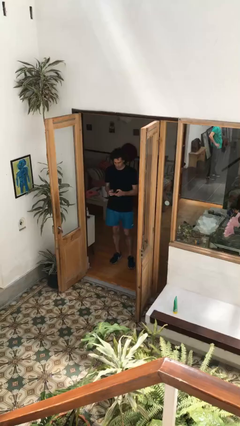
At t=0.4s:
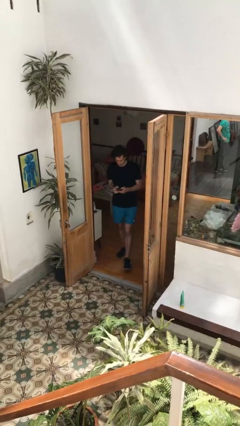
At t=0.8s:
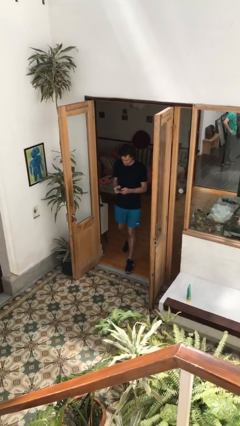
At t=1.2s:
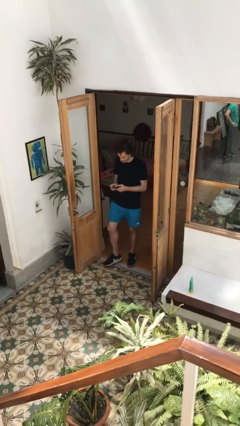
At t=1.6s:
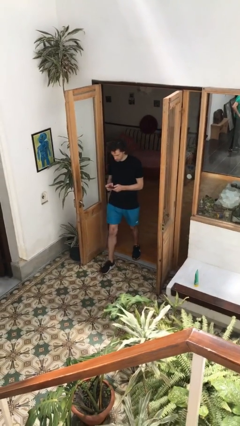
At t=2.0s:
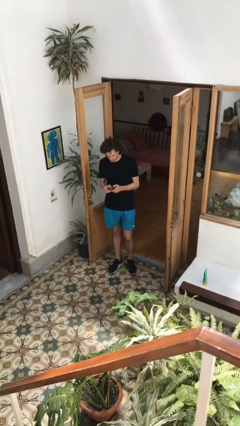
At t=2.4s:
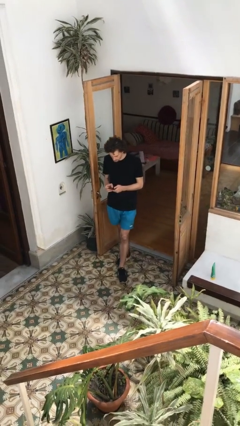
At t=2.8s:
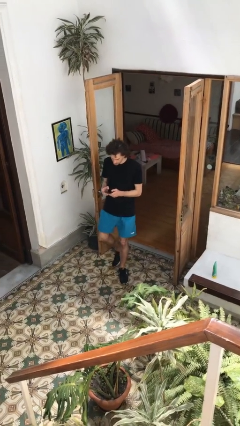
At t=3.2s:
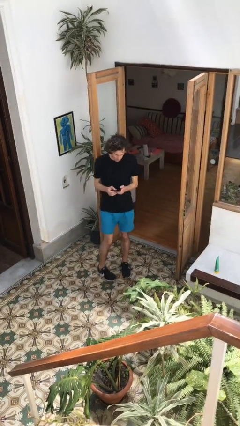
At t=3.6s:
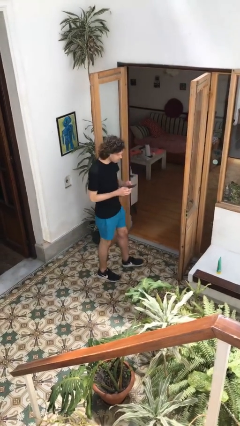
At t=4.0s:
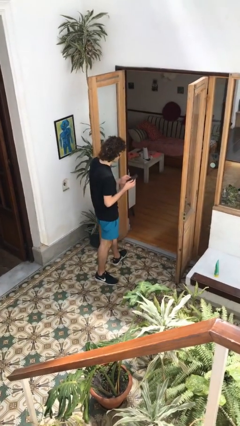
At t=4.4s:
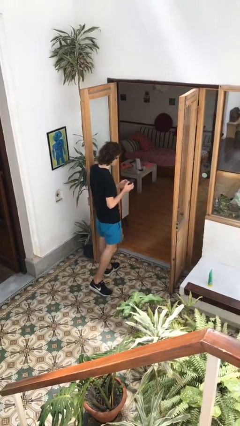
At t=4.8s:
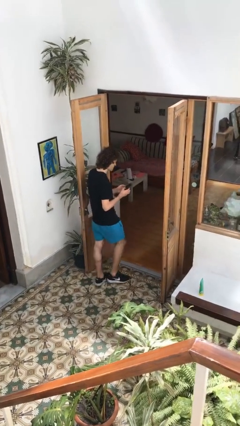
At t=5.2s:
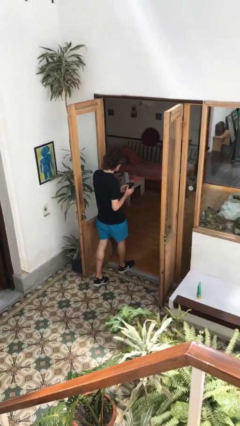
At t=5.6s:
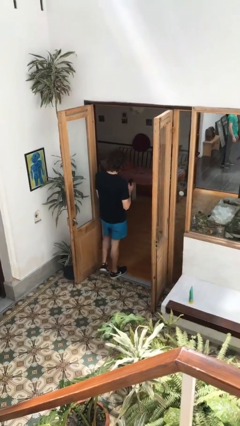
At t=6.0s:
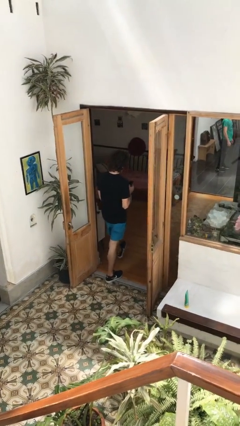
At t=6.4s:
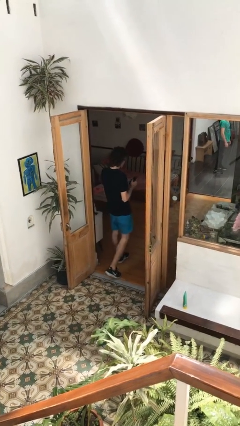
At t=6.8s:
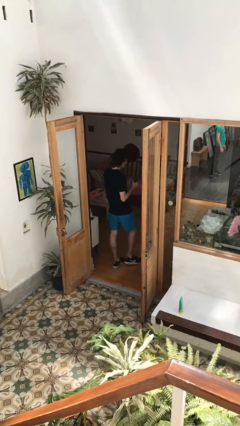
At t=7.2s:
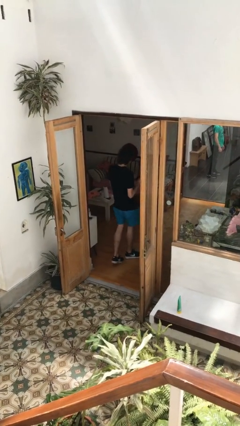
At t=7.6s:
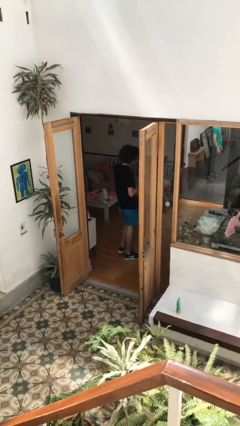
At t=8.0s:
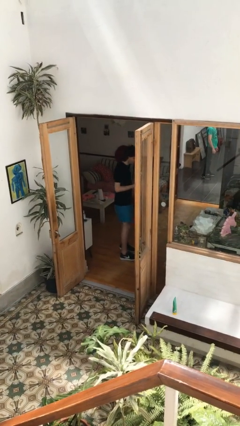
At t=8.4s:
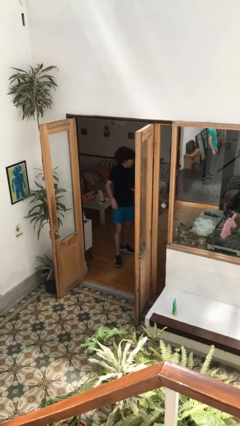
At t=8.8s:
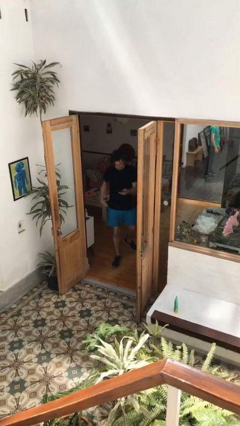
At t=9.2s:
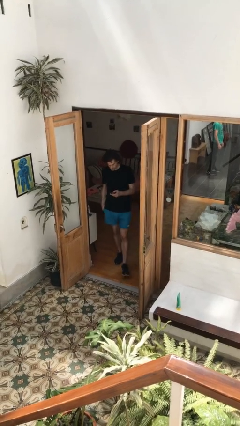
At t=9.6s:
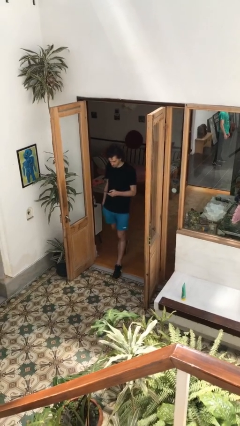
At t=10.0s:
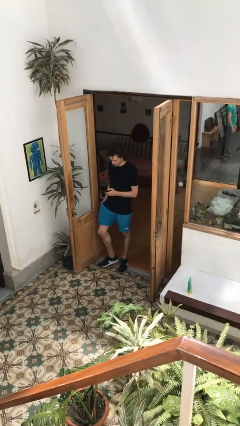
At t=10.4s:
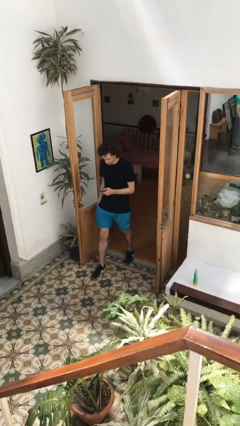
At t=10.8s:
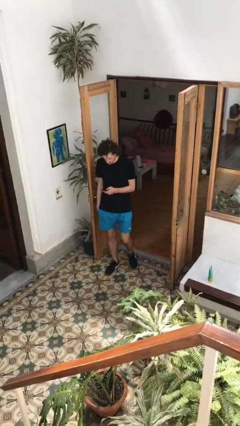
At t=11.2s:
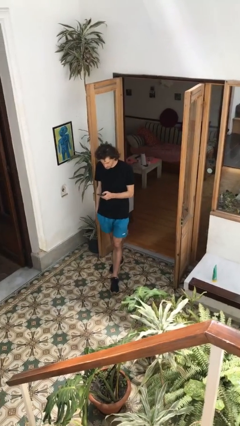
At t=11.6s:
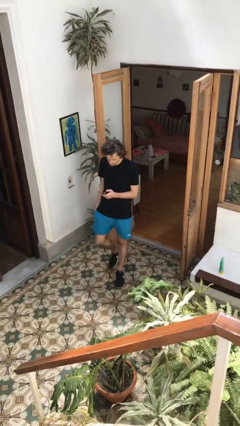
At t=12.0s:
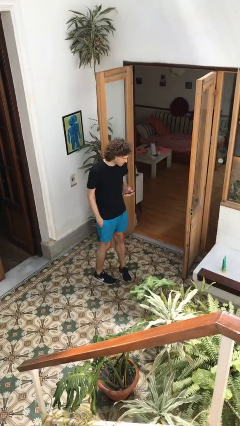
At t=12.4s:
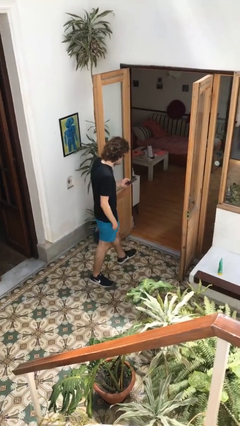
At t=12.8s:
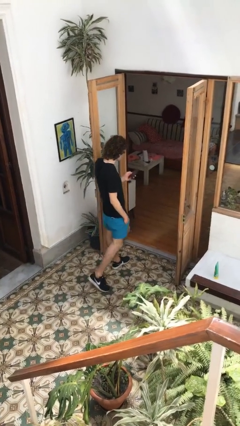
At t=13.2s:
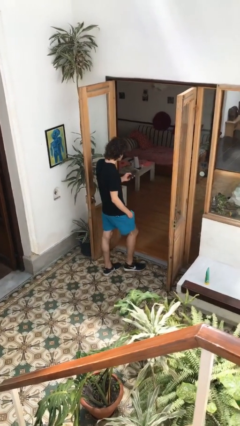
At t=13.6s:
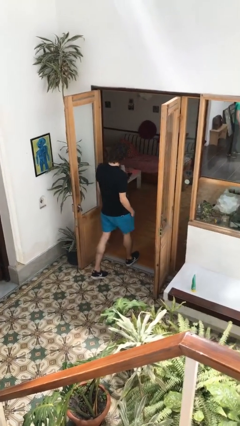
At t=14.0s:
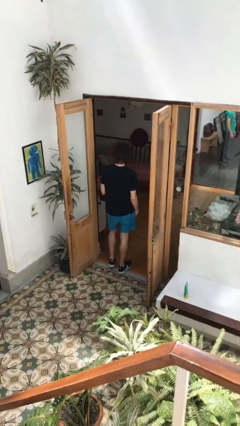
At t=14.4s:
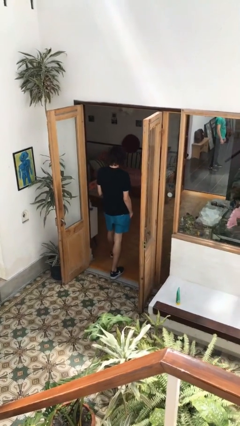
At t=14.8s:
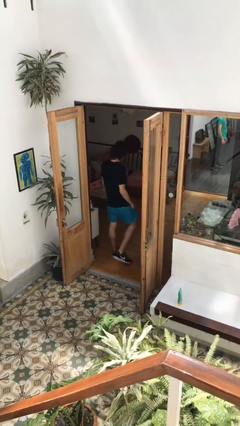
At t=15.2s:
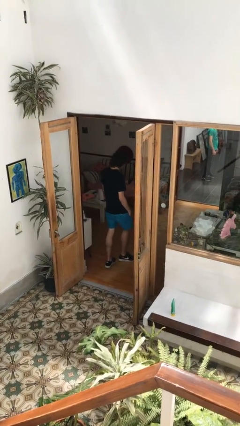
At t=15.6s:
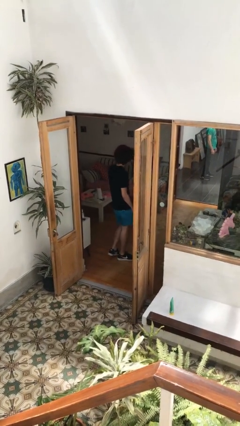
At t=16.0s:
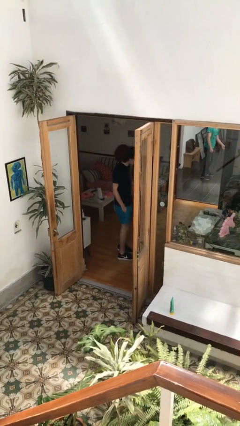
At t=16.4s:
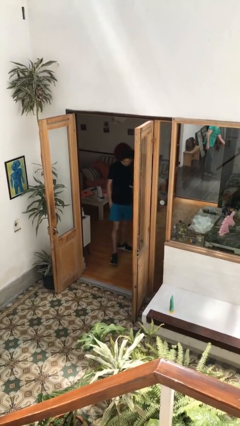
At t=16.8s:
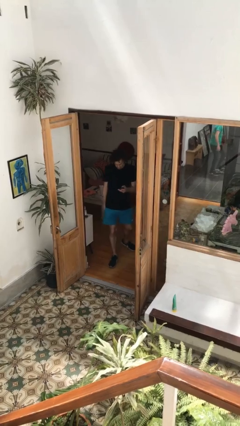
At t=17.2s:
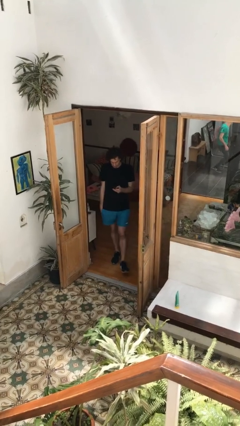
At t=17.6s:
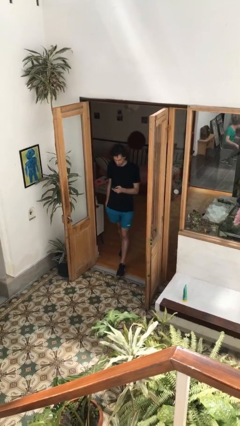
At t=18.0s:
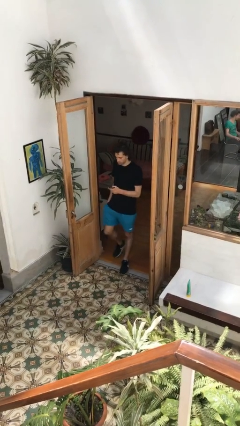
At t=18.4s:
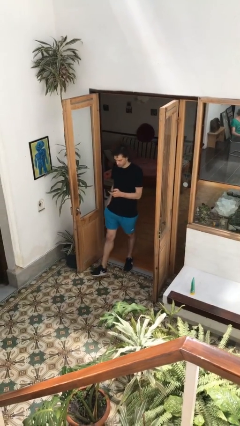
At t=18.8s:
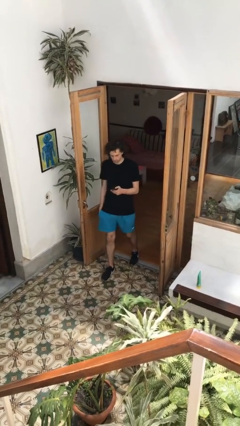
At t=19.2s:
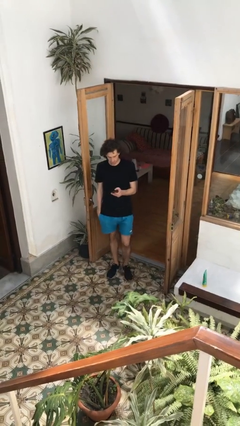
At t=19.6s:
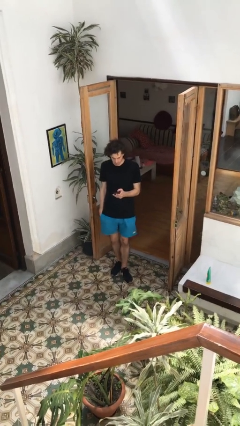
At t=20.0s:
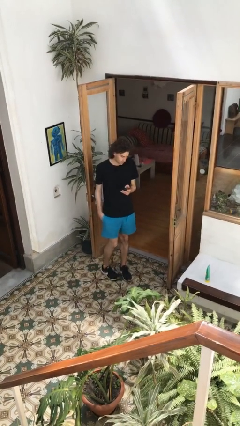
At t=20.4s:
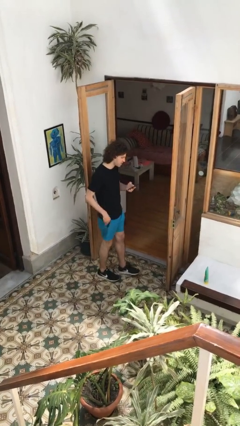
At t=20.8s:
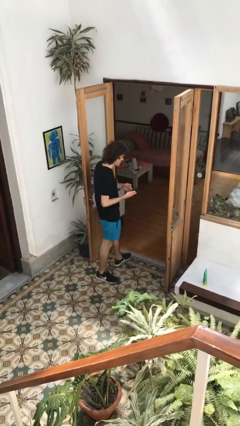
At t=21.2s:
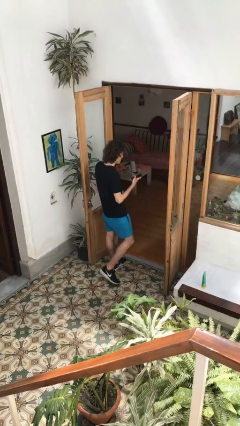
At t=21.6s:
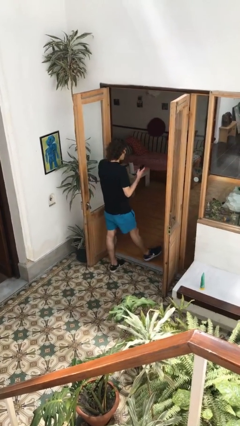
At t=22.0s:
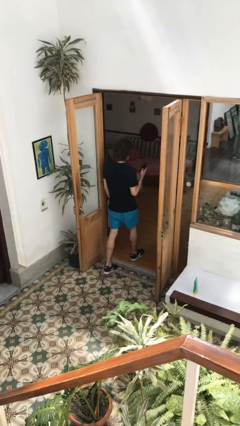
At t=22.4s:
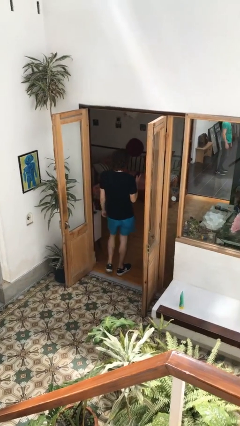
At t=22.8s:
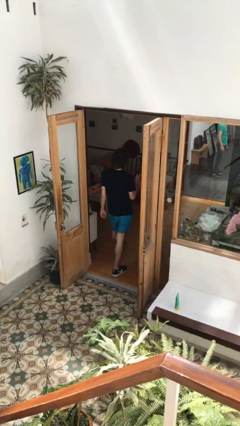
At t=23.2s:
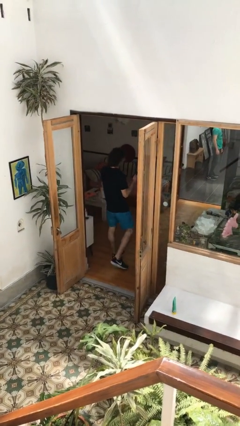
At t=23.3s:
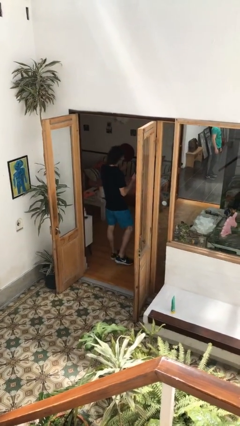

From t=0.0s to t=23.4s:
person texts on phone

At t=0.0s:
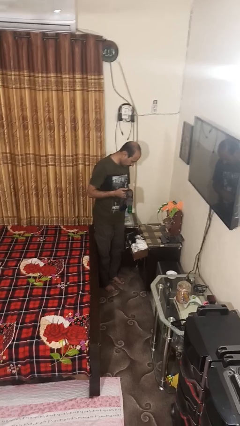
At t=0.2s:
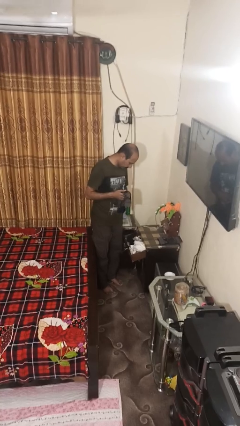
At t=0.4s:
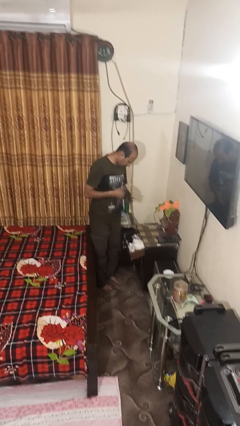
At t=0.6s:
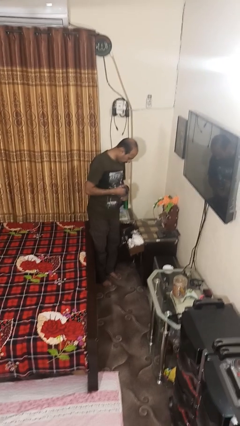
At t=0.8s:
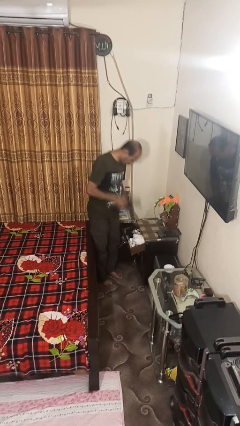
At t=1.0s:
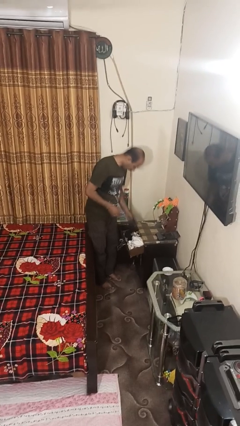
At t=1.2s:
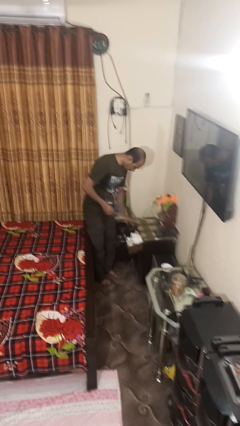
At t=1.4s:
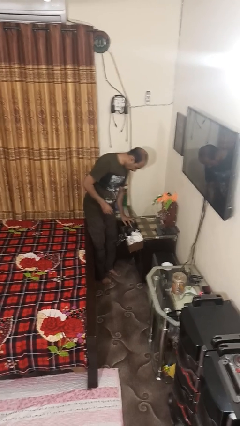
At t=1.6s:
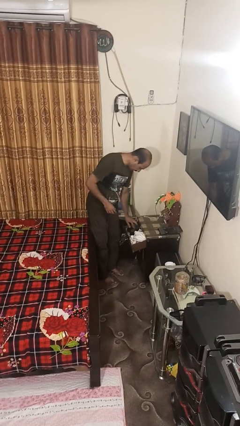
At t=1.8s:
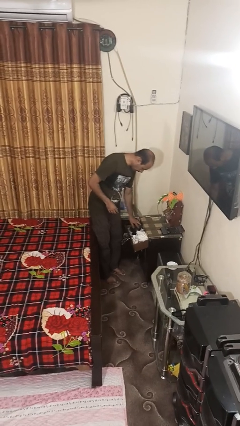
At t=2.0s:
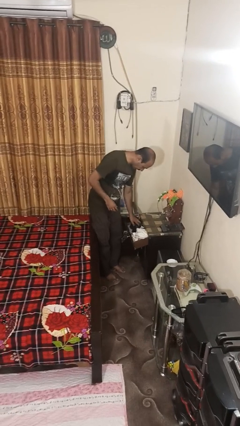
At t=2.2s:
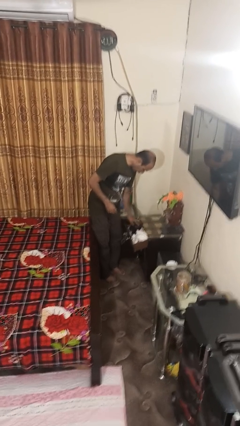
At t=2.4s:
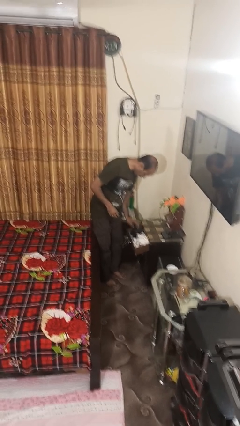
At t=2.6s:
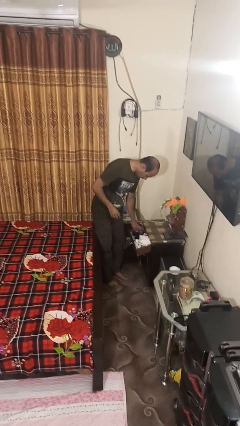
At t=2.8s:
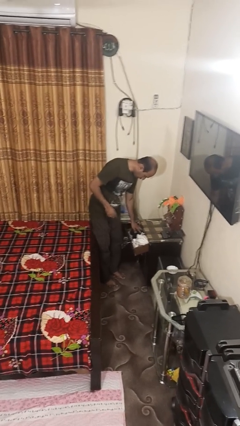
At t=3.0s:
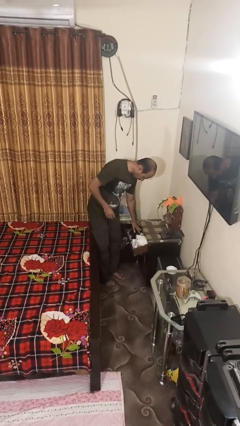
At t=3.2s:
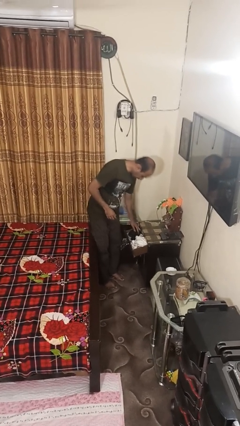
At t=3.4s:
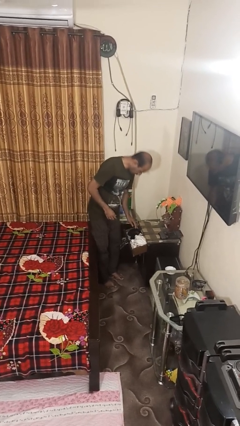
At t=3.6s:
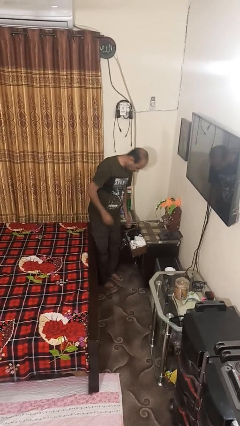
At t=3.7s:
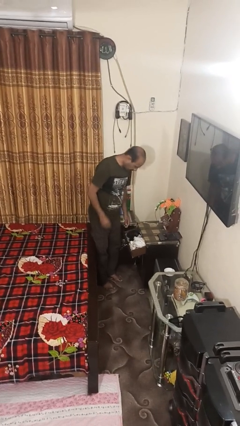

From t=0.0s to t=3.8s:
person puts clothes into dresser

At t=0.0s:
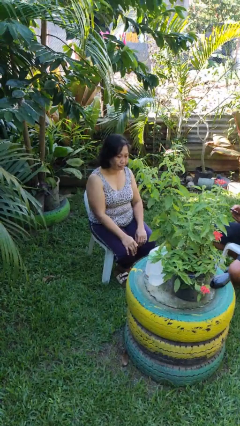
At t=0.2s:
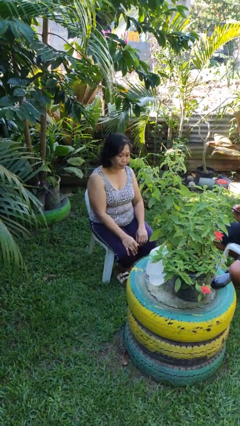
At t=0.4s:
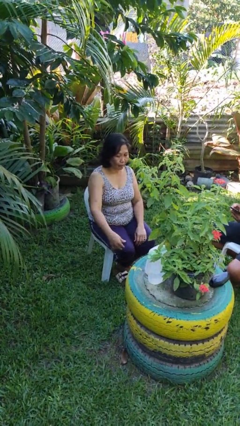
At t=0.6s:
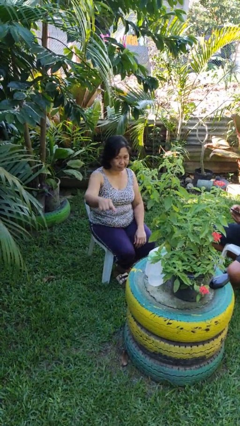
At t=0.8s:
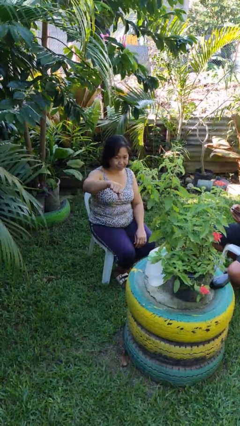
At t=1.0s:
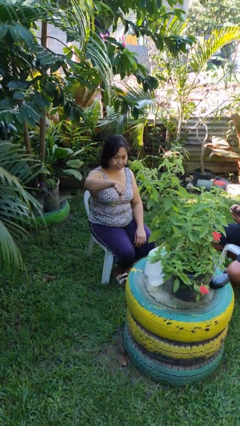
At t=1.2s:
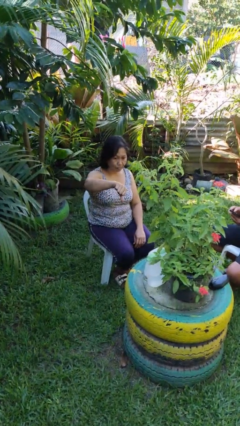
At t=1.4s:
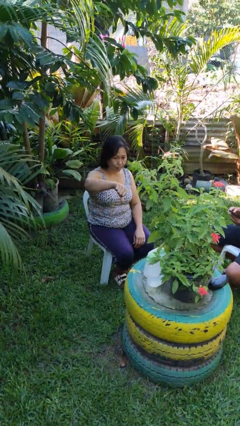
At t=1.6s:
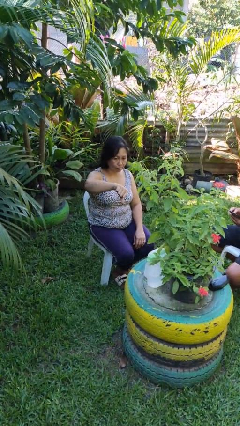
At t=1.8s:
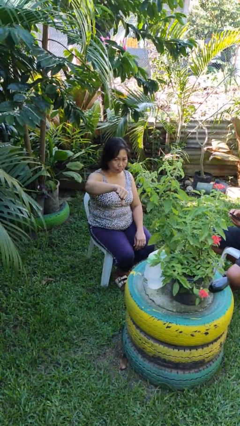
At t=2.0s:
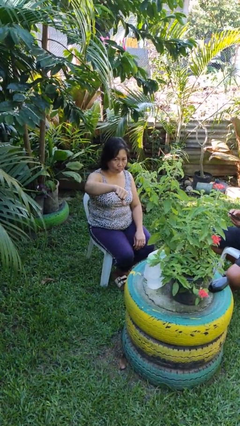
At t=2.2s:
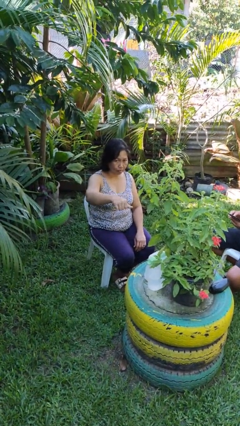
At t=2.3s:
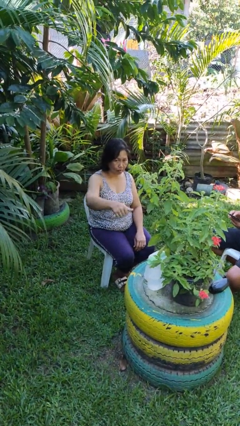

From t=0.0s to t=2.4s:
person gestures thumbs down
